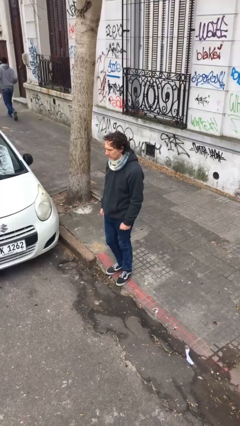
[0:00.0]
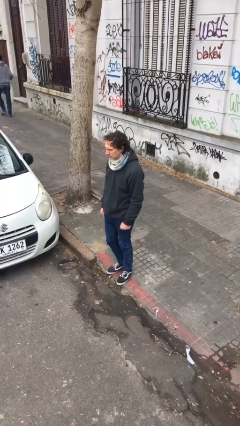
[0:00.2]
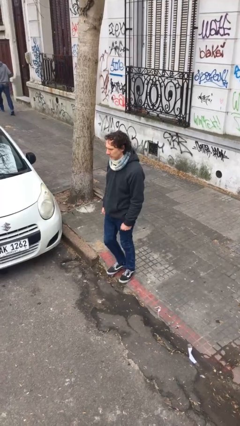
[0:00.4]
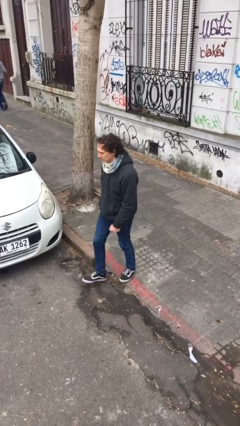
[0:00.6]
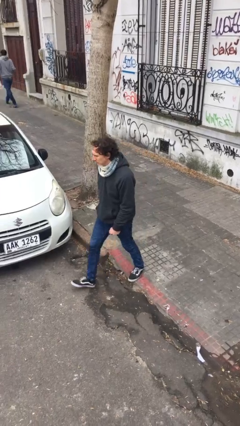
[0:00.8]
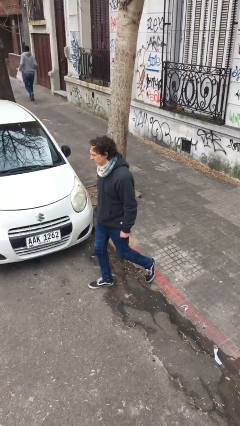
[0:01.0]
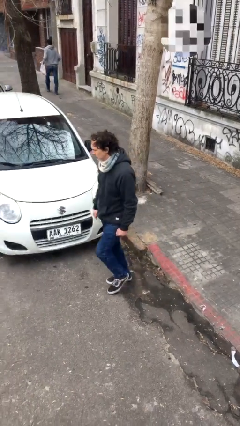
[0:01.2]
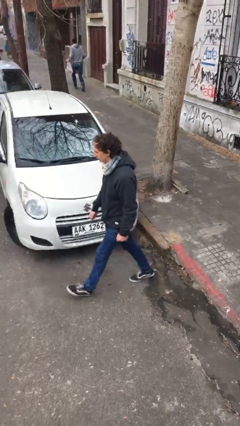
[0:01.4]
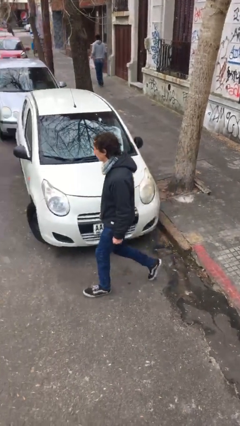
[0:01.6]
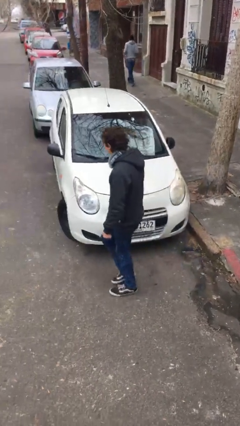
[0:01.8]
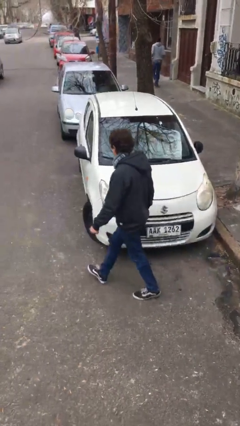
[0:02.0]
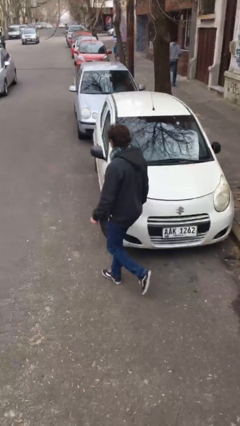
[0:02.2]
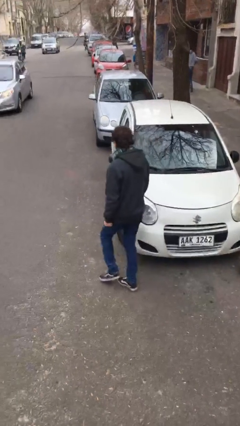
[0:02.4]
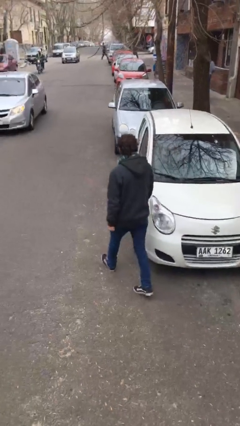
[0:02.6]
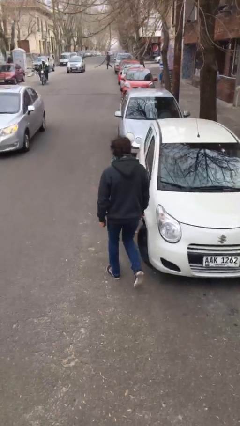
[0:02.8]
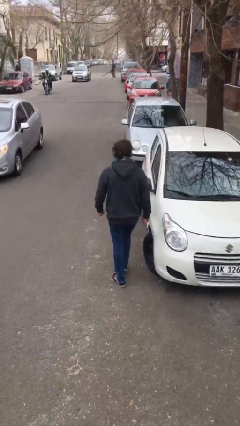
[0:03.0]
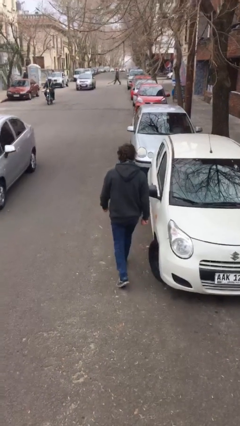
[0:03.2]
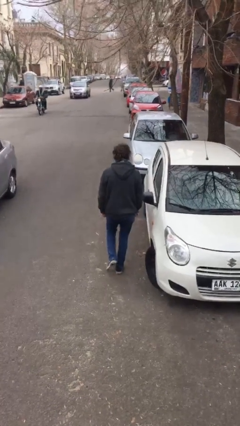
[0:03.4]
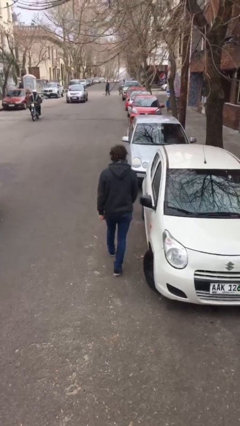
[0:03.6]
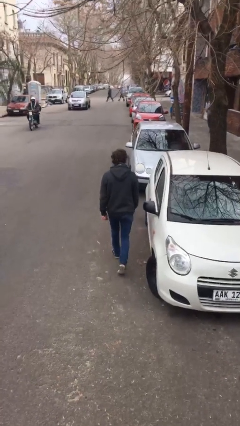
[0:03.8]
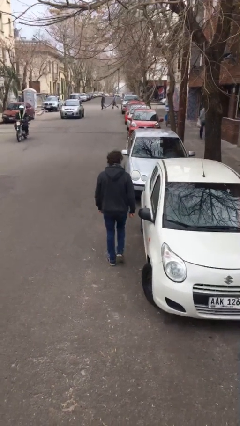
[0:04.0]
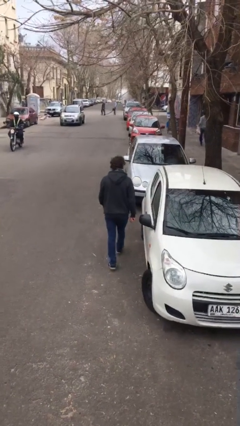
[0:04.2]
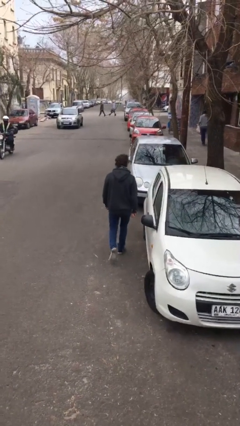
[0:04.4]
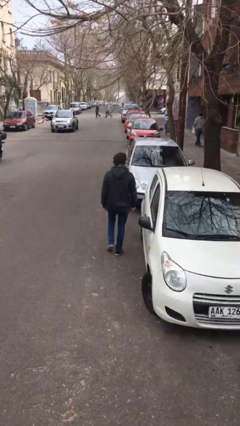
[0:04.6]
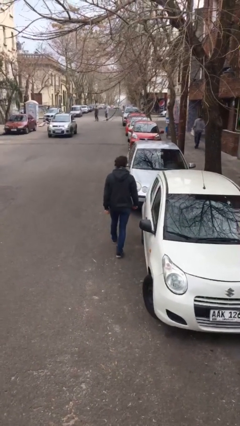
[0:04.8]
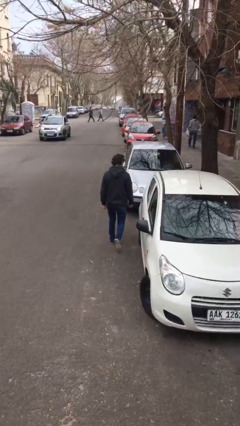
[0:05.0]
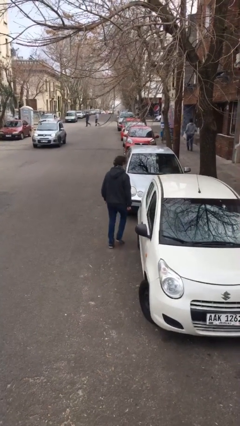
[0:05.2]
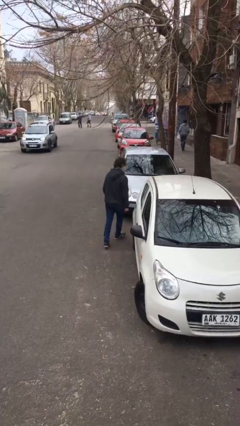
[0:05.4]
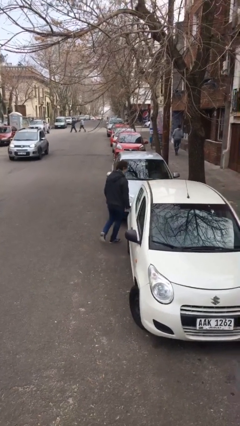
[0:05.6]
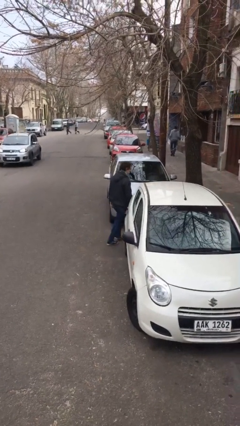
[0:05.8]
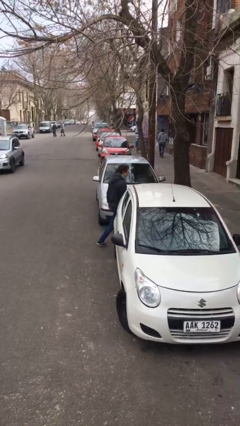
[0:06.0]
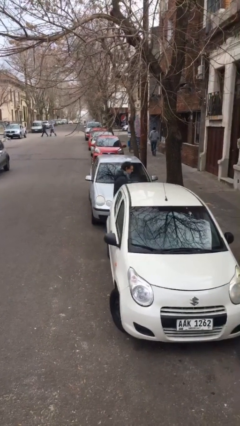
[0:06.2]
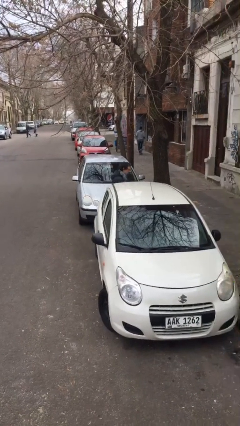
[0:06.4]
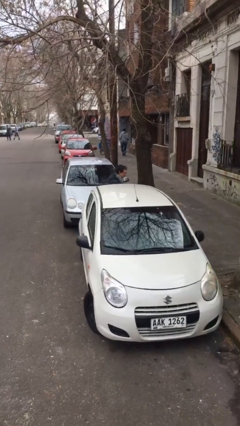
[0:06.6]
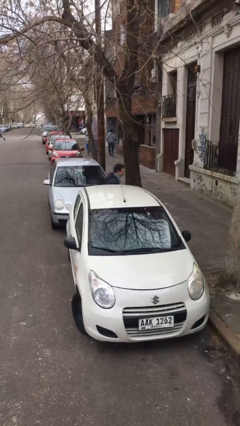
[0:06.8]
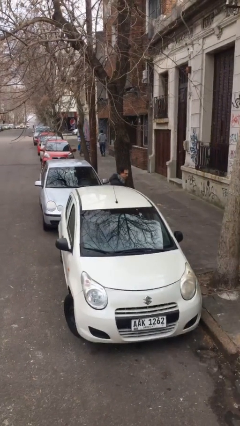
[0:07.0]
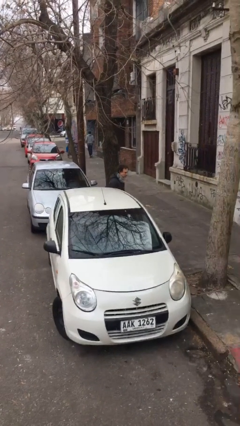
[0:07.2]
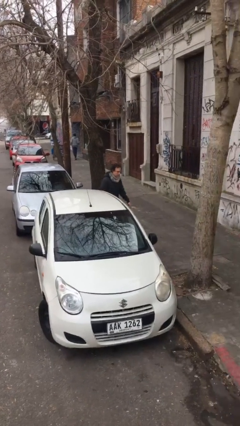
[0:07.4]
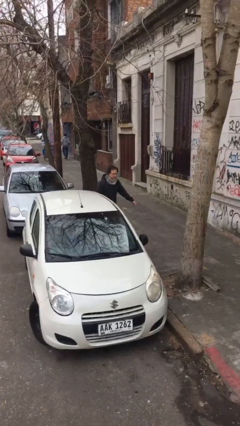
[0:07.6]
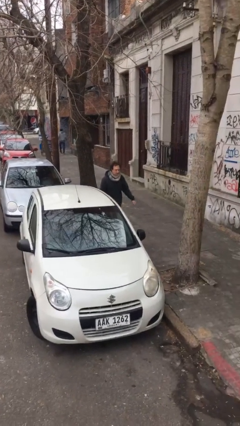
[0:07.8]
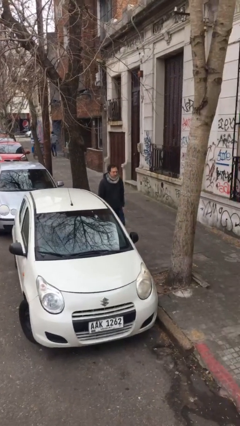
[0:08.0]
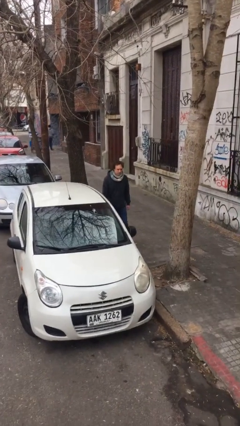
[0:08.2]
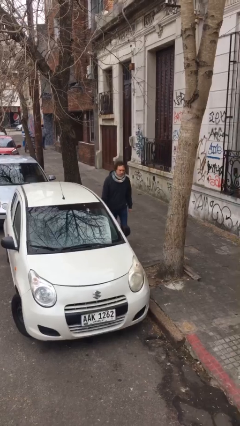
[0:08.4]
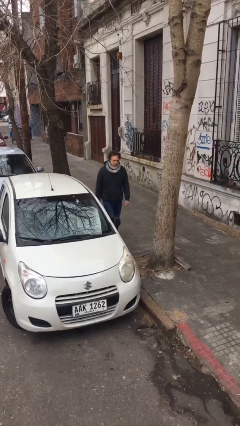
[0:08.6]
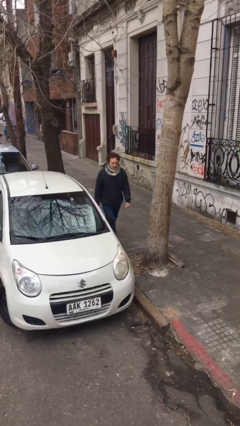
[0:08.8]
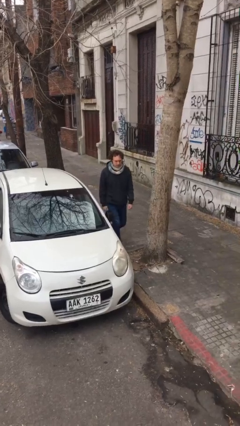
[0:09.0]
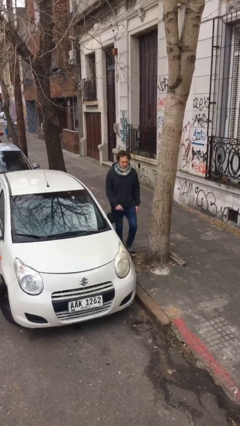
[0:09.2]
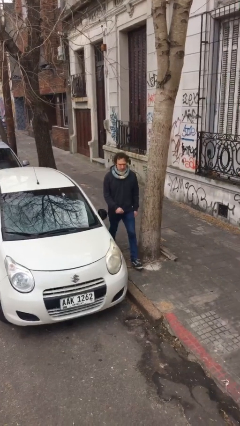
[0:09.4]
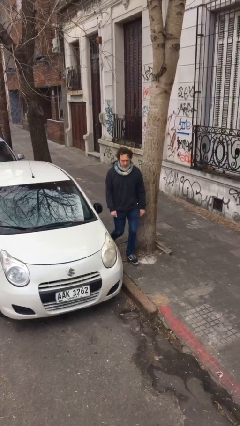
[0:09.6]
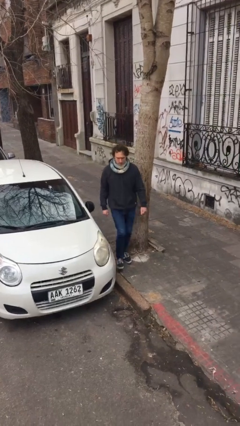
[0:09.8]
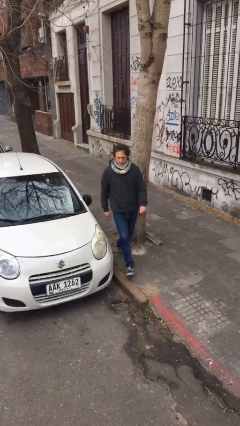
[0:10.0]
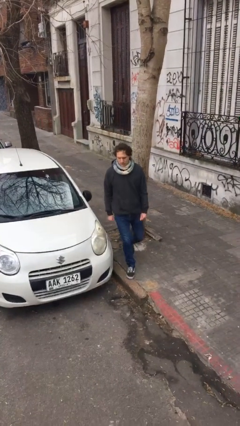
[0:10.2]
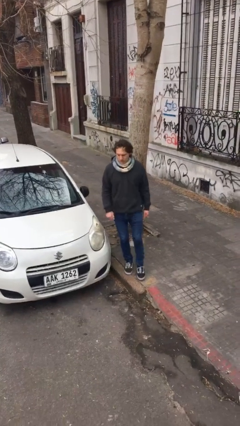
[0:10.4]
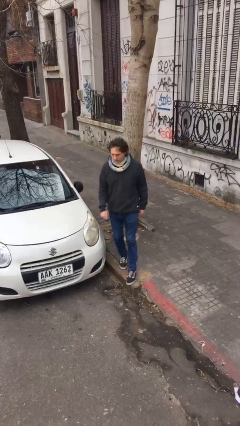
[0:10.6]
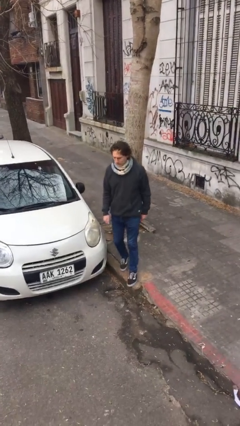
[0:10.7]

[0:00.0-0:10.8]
person walks around car

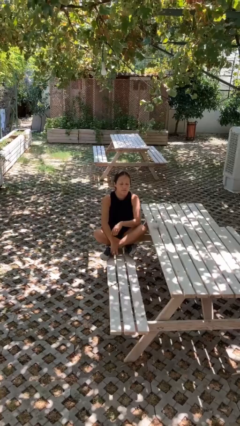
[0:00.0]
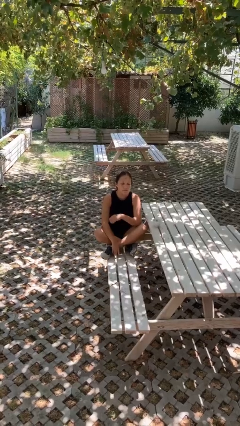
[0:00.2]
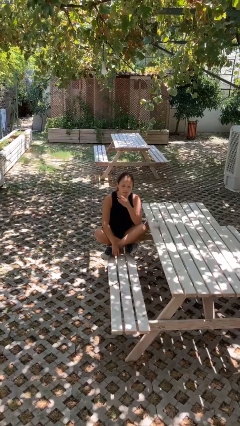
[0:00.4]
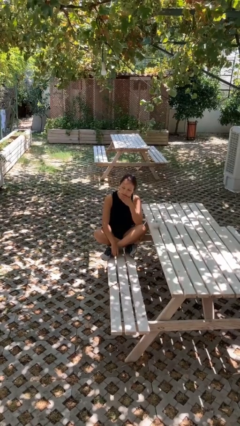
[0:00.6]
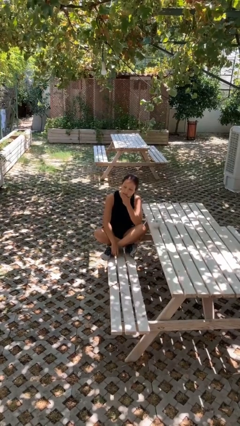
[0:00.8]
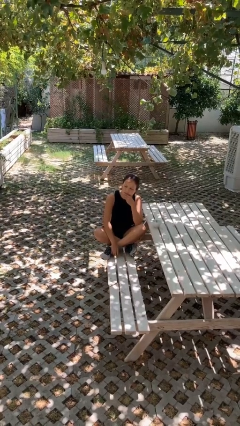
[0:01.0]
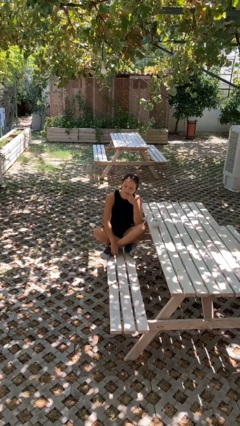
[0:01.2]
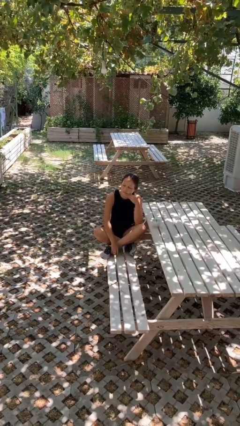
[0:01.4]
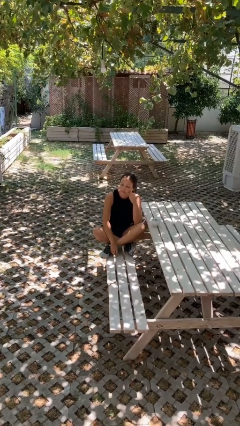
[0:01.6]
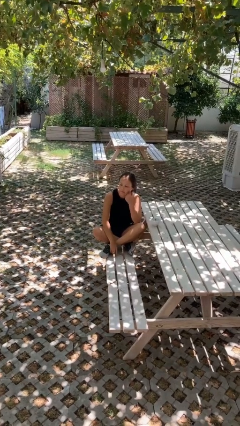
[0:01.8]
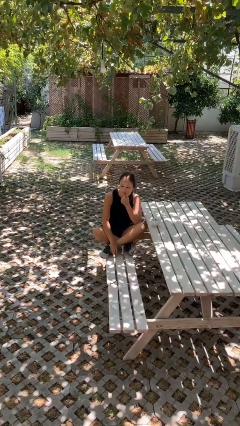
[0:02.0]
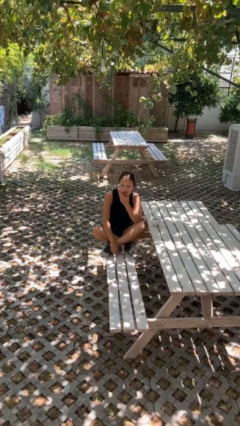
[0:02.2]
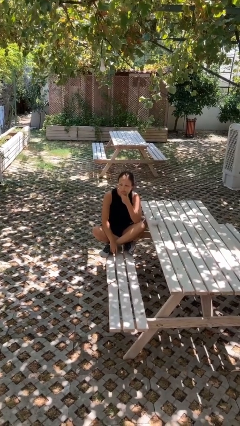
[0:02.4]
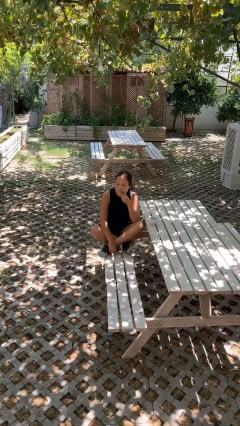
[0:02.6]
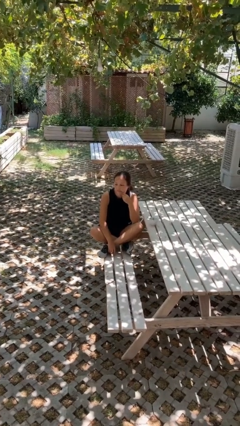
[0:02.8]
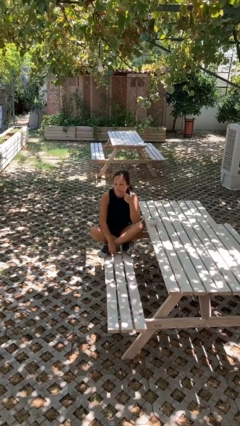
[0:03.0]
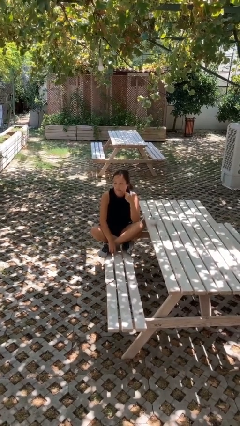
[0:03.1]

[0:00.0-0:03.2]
person strokes chin

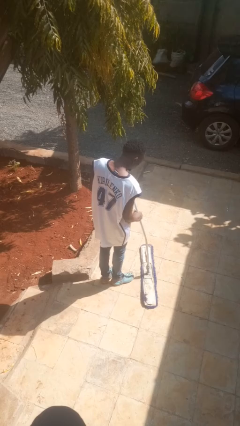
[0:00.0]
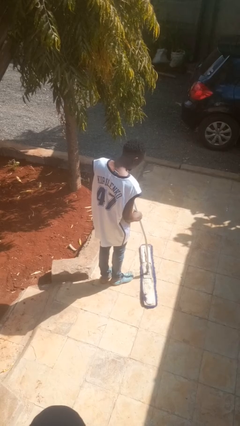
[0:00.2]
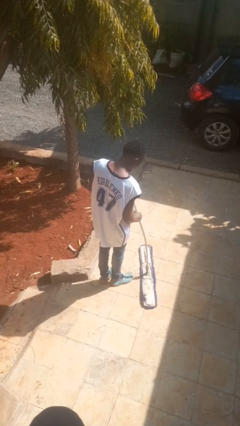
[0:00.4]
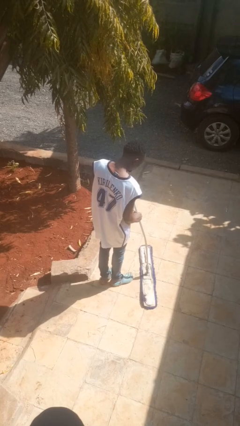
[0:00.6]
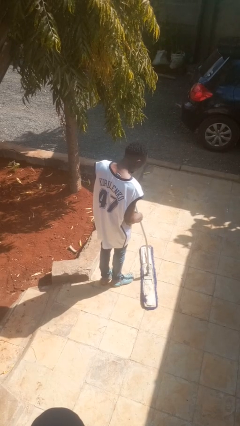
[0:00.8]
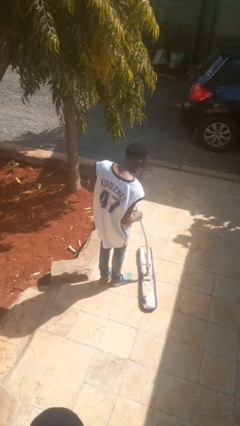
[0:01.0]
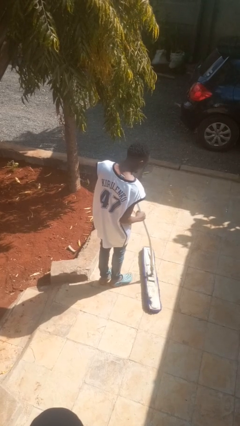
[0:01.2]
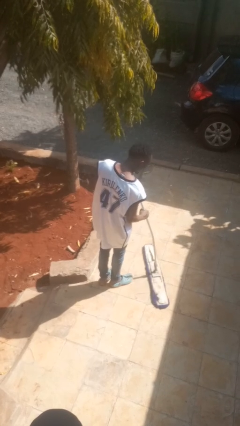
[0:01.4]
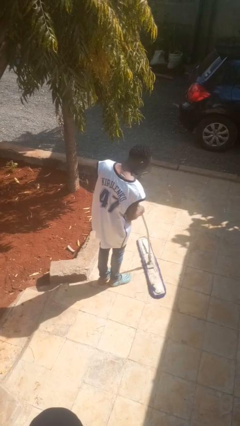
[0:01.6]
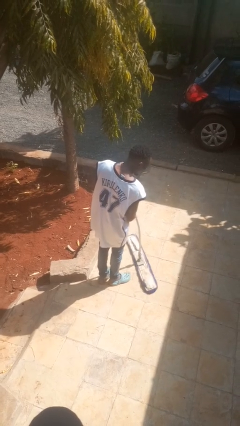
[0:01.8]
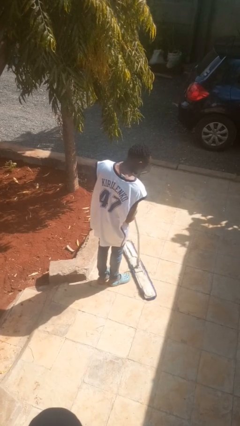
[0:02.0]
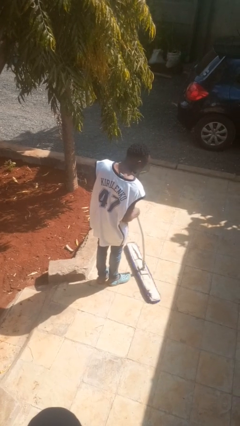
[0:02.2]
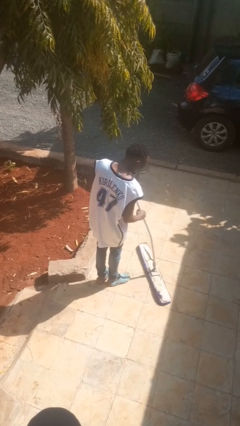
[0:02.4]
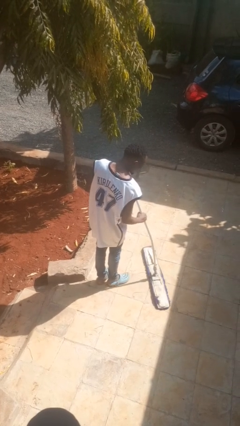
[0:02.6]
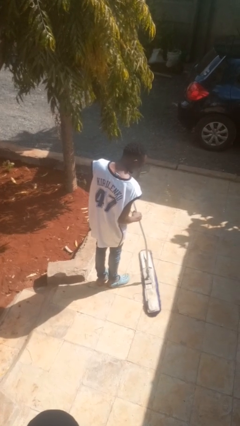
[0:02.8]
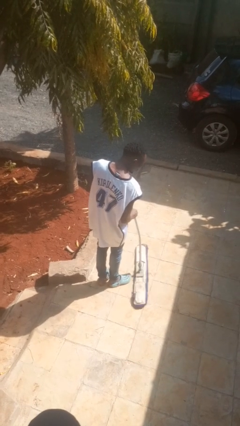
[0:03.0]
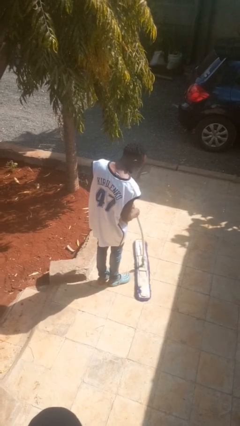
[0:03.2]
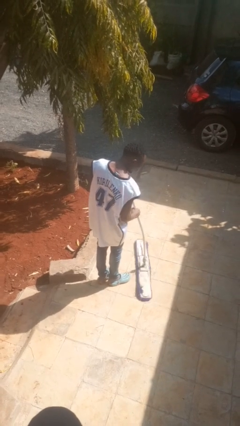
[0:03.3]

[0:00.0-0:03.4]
person mops

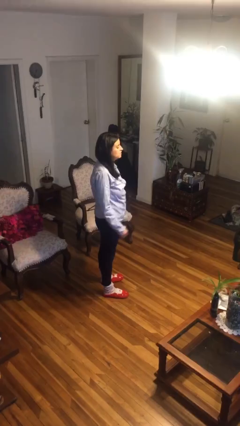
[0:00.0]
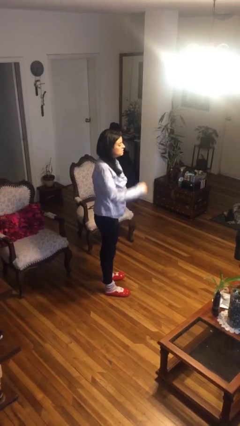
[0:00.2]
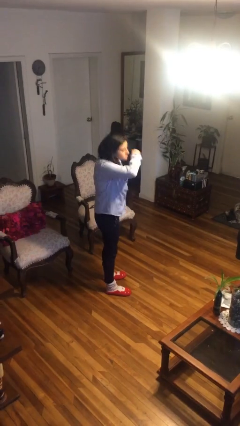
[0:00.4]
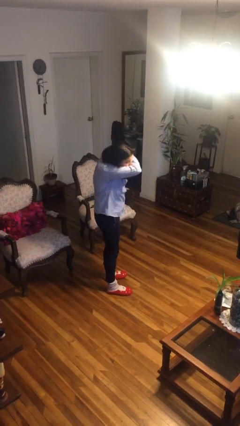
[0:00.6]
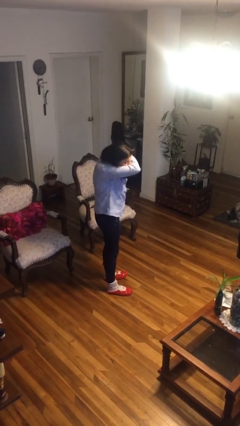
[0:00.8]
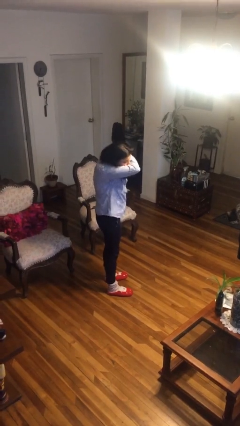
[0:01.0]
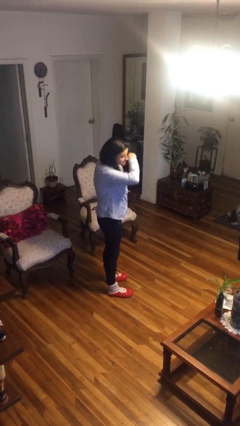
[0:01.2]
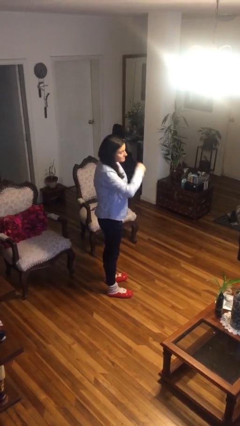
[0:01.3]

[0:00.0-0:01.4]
person sneezes into arm
